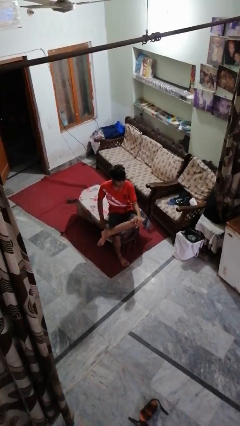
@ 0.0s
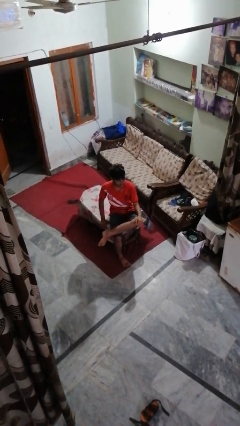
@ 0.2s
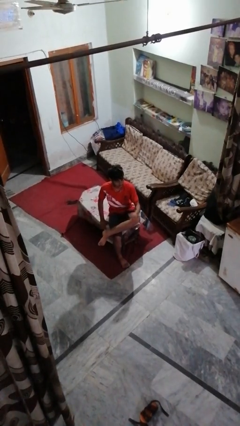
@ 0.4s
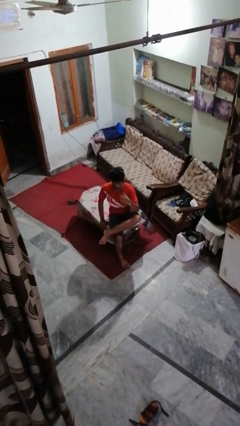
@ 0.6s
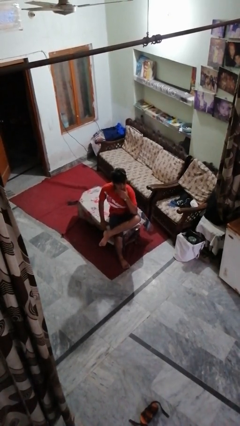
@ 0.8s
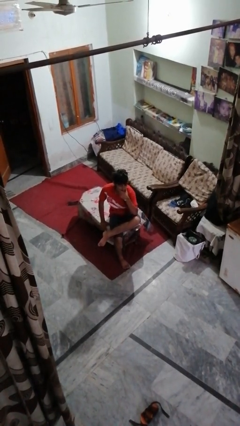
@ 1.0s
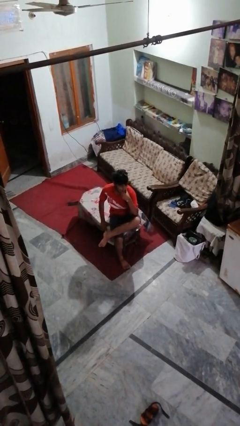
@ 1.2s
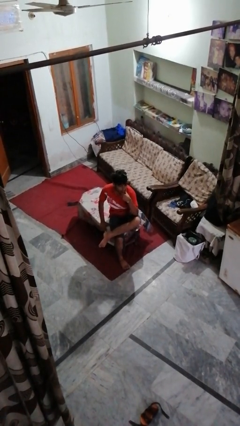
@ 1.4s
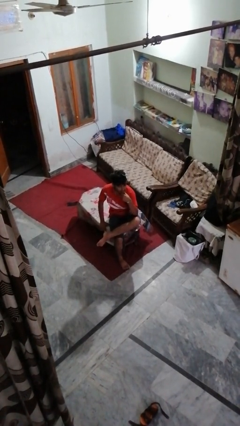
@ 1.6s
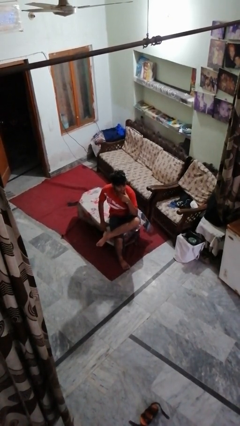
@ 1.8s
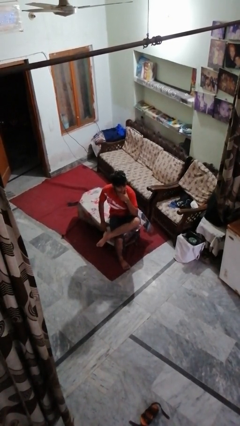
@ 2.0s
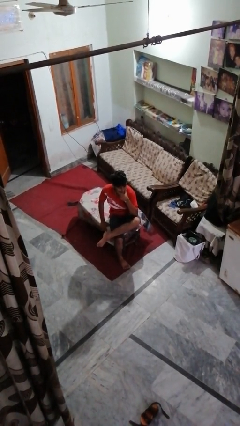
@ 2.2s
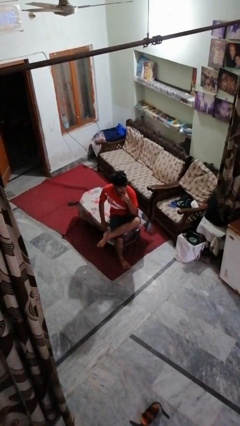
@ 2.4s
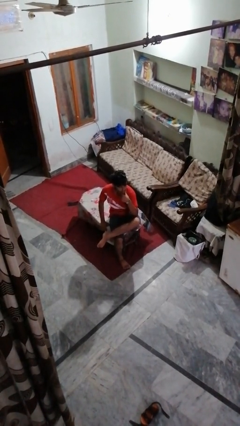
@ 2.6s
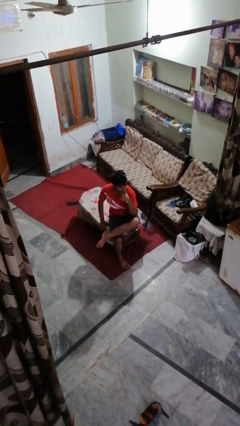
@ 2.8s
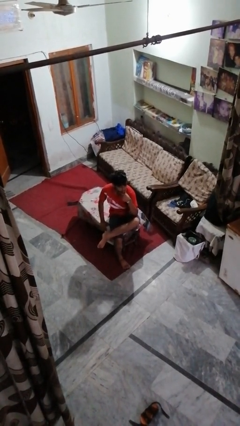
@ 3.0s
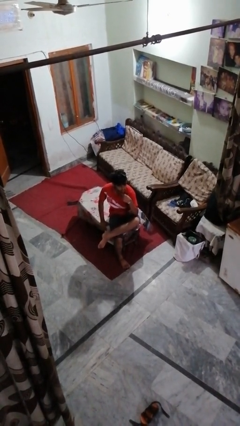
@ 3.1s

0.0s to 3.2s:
person strokes chin

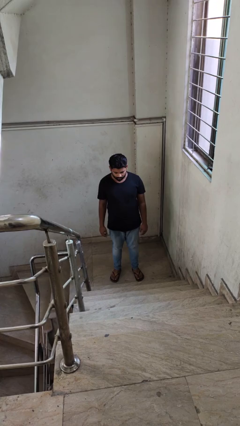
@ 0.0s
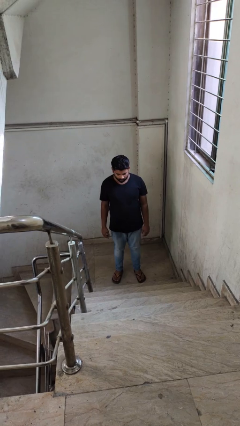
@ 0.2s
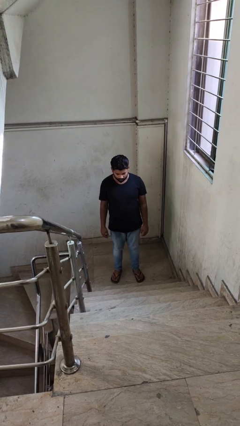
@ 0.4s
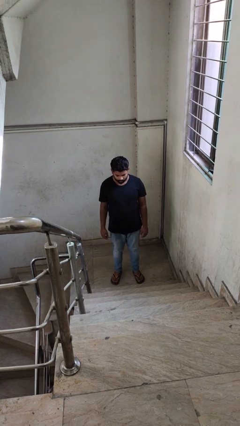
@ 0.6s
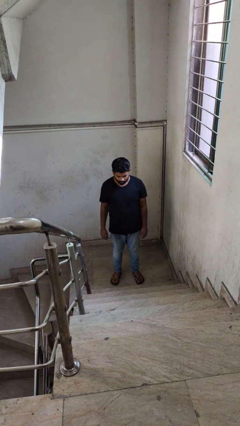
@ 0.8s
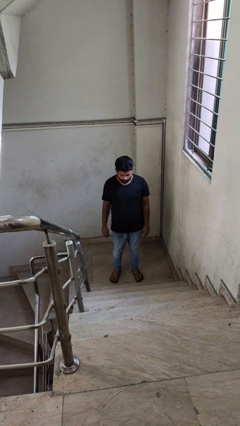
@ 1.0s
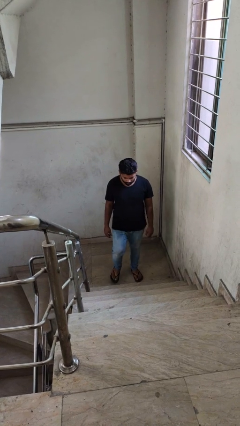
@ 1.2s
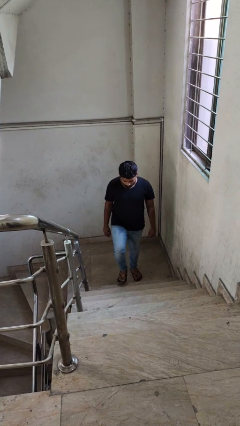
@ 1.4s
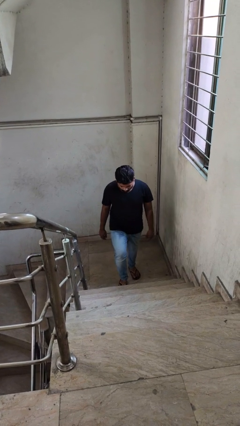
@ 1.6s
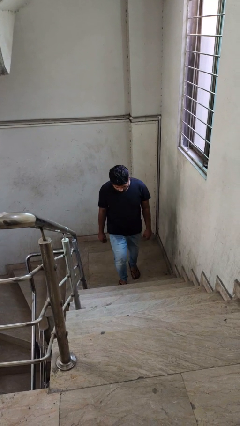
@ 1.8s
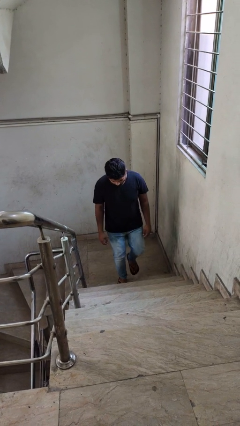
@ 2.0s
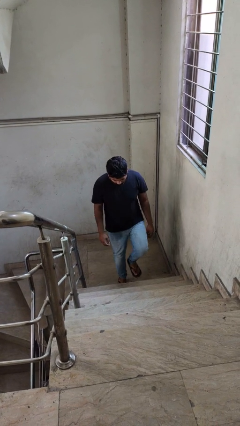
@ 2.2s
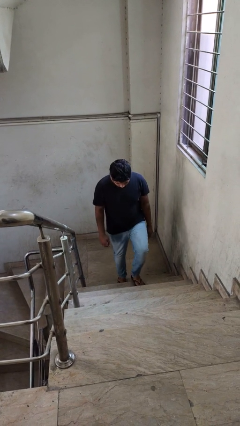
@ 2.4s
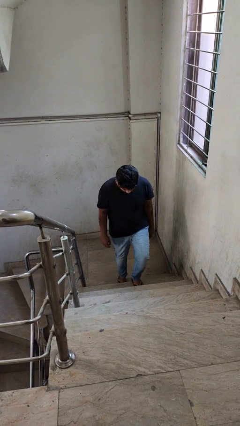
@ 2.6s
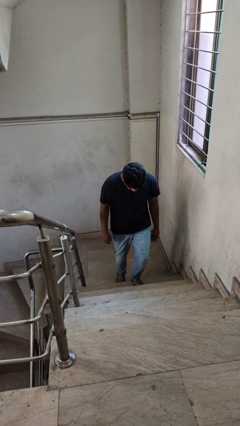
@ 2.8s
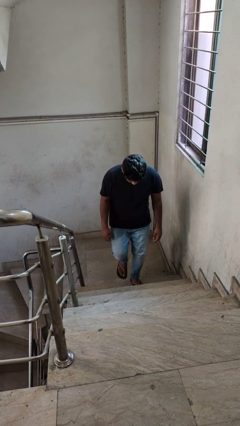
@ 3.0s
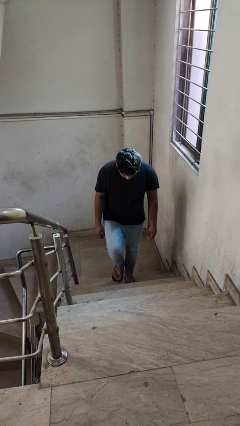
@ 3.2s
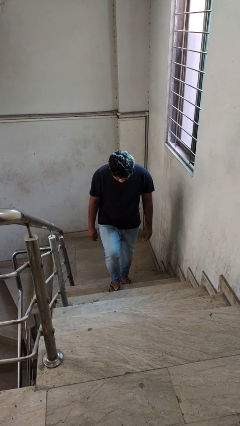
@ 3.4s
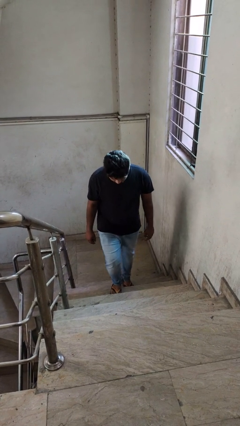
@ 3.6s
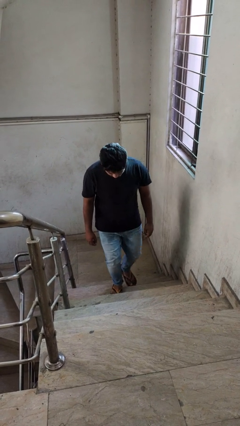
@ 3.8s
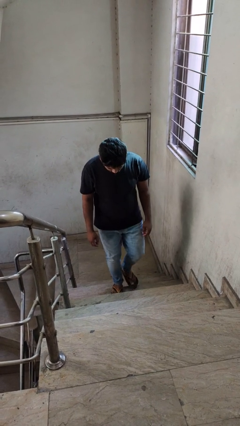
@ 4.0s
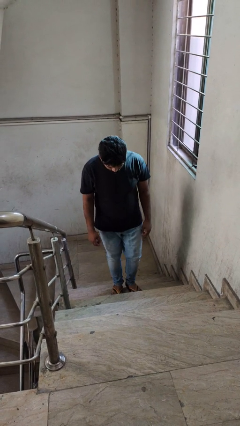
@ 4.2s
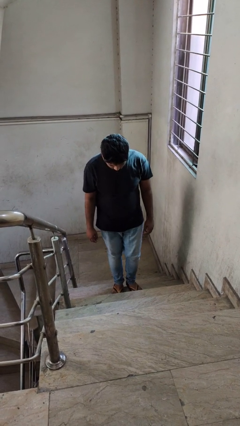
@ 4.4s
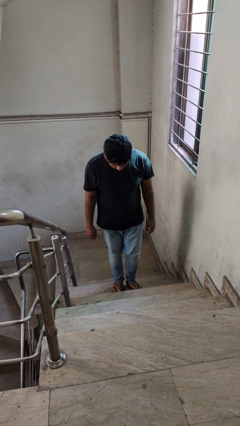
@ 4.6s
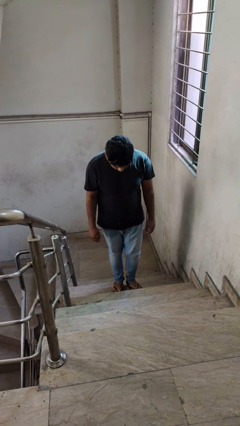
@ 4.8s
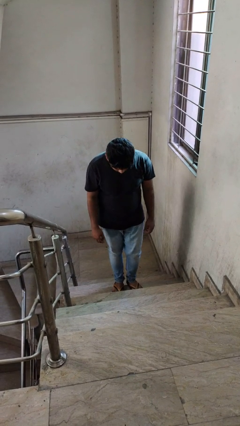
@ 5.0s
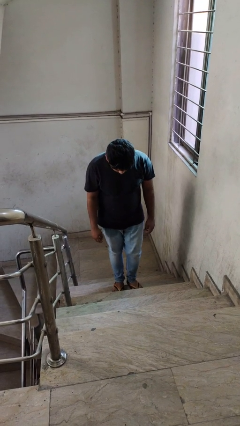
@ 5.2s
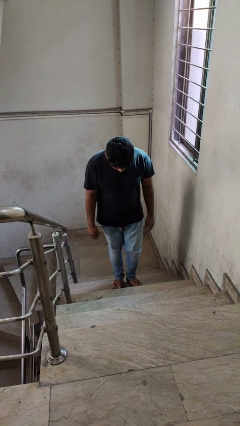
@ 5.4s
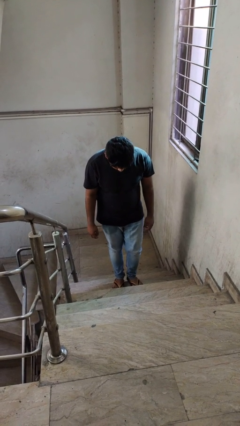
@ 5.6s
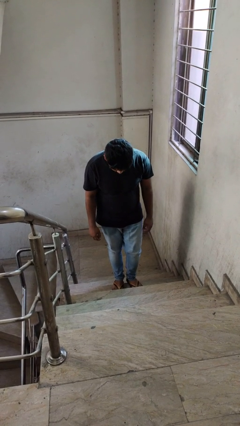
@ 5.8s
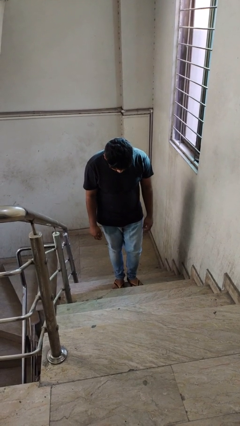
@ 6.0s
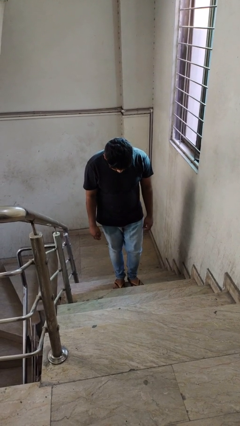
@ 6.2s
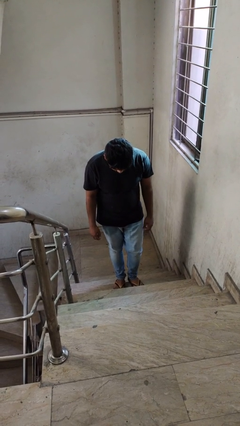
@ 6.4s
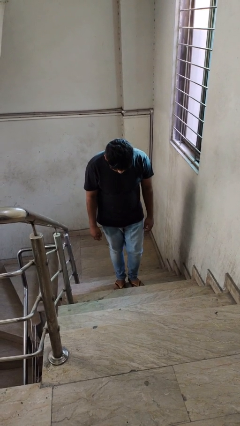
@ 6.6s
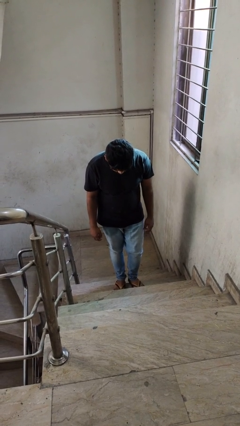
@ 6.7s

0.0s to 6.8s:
person climbs up stairs

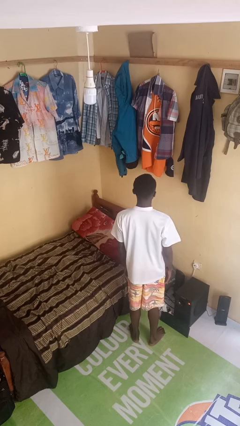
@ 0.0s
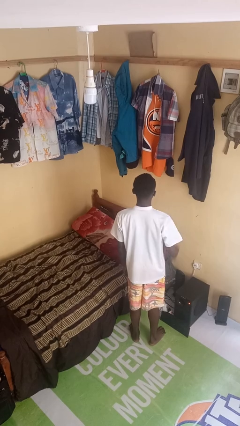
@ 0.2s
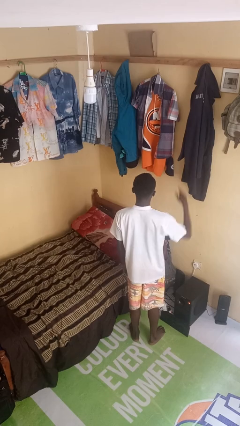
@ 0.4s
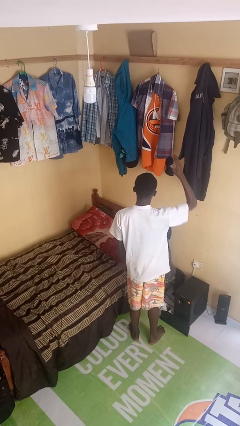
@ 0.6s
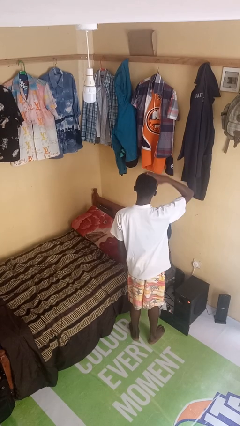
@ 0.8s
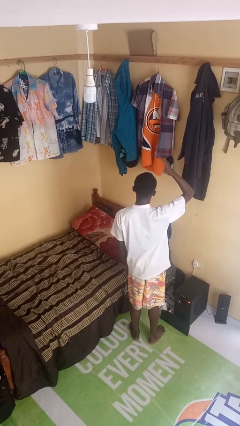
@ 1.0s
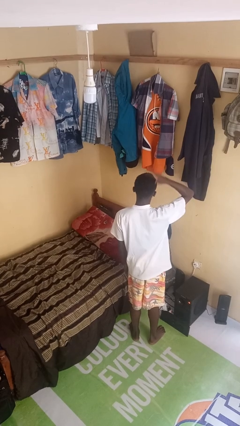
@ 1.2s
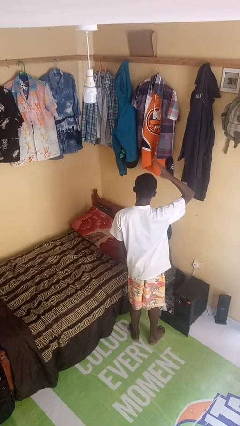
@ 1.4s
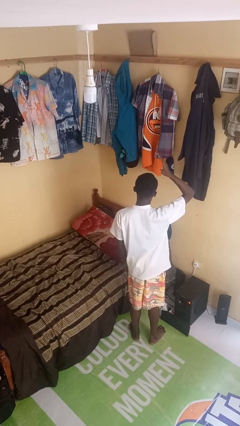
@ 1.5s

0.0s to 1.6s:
person pats head

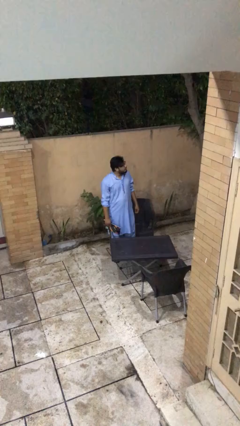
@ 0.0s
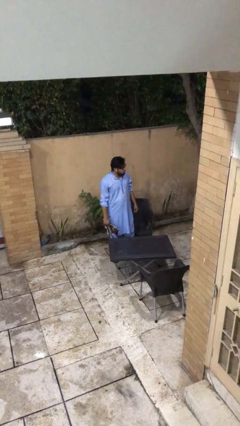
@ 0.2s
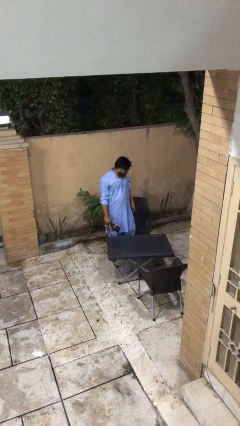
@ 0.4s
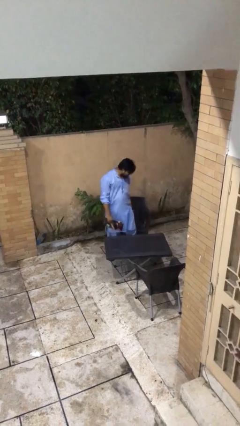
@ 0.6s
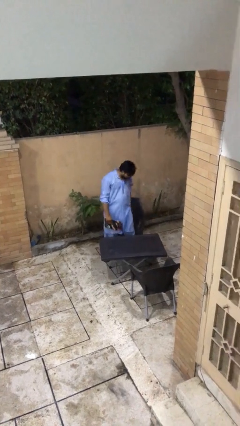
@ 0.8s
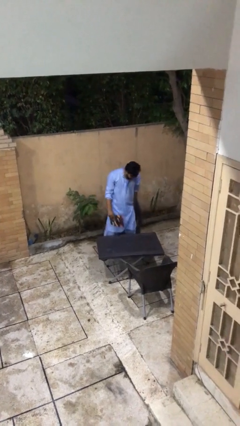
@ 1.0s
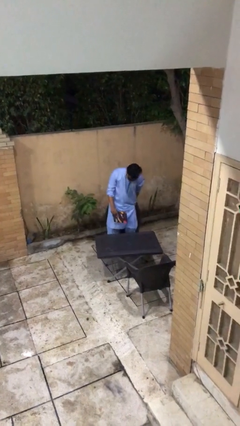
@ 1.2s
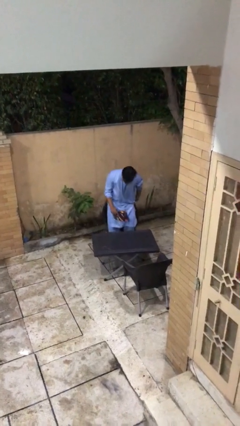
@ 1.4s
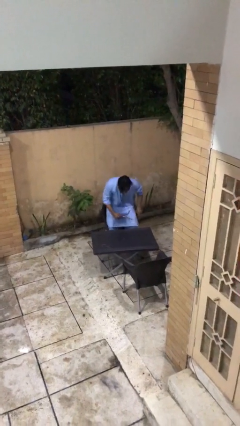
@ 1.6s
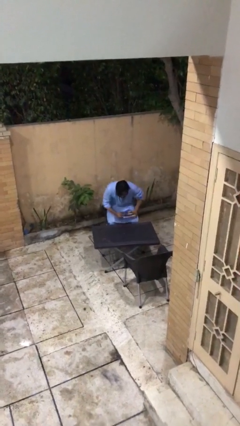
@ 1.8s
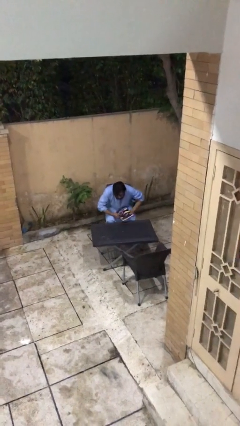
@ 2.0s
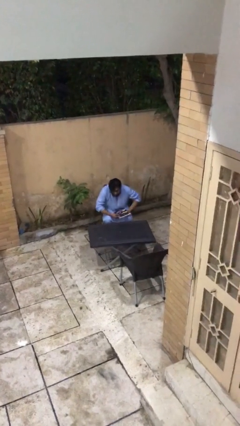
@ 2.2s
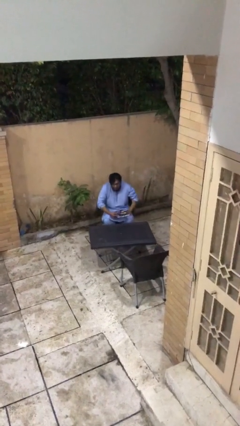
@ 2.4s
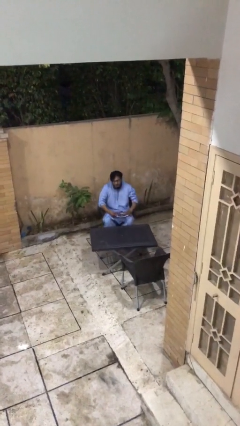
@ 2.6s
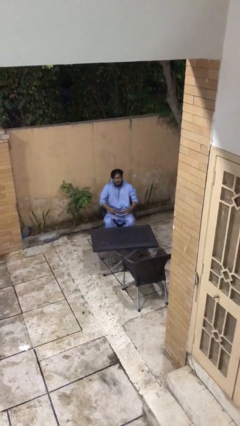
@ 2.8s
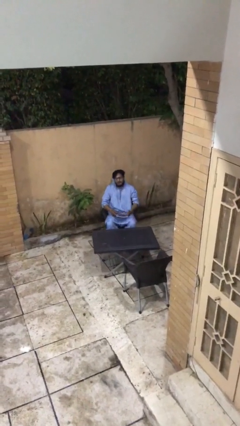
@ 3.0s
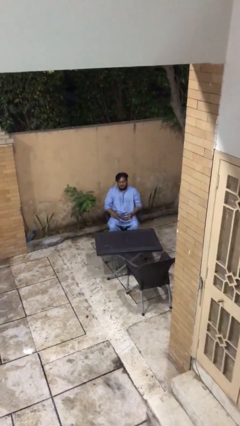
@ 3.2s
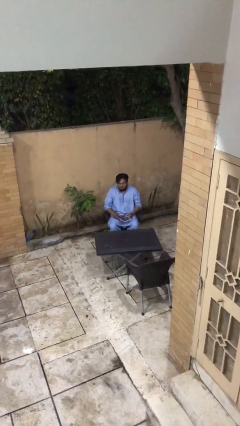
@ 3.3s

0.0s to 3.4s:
person sits down

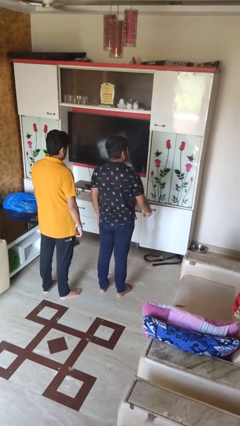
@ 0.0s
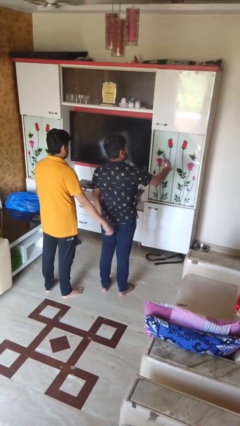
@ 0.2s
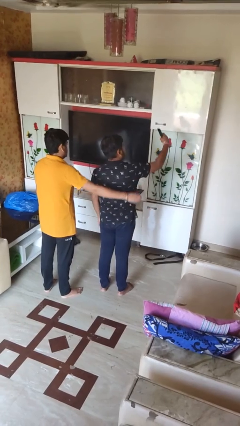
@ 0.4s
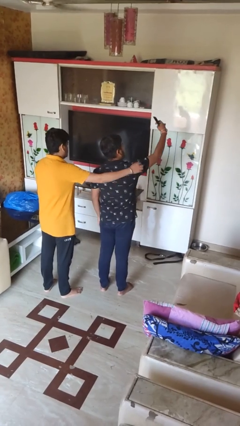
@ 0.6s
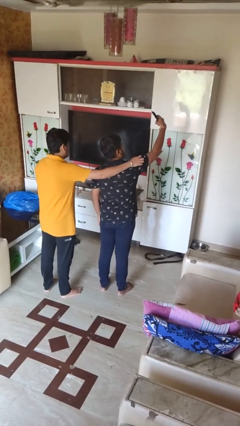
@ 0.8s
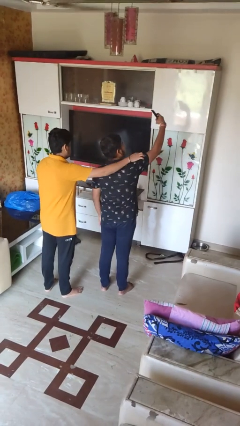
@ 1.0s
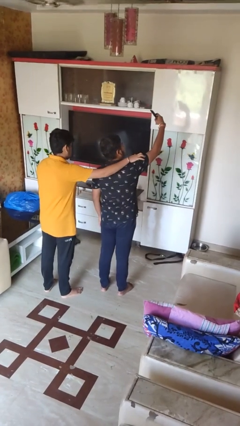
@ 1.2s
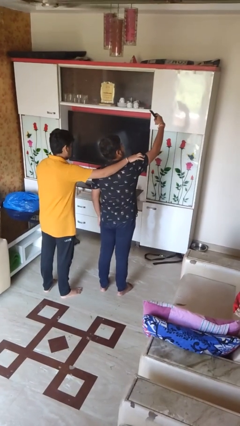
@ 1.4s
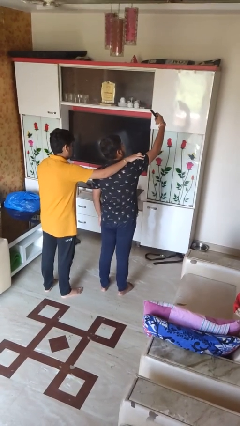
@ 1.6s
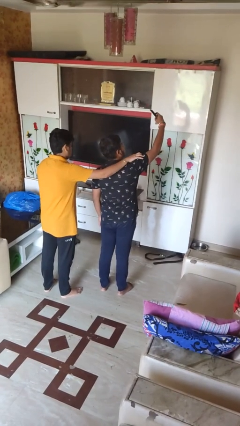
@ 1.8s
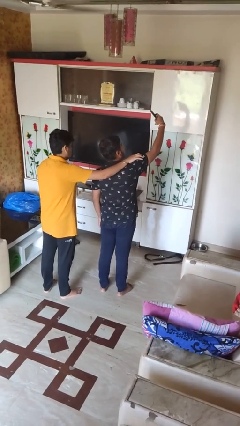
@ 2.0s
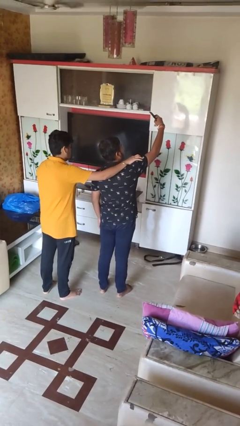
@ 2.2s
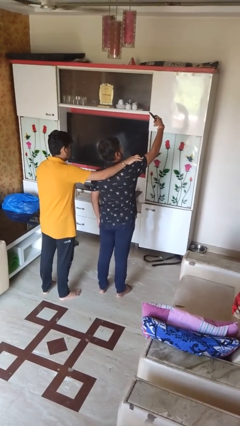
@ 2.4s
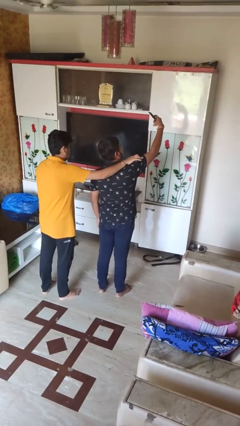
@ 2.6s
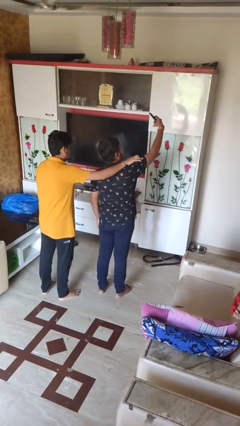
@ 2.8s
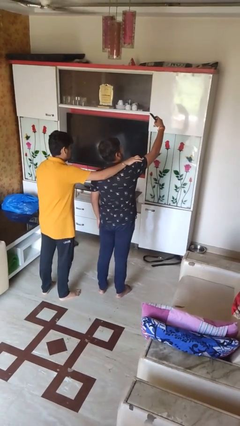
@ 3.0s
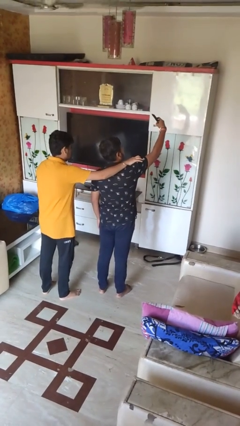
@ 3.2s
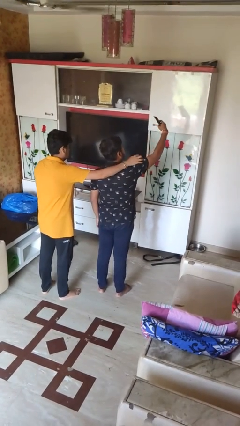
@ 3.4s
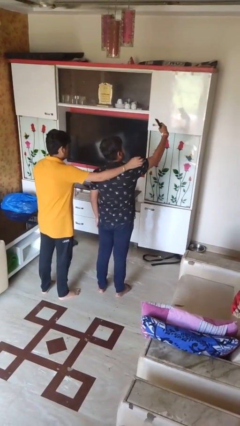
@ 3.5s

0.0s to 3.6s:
person takes selfie with person
